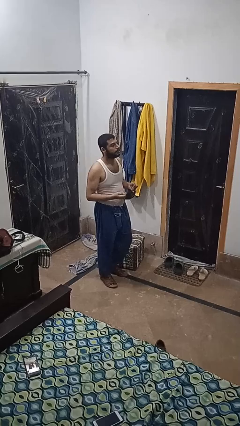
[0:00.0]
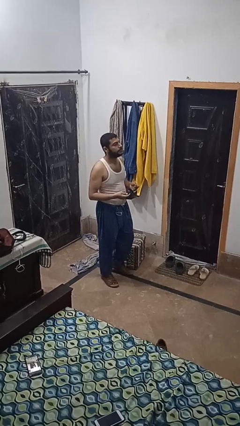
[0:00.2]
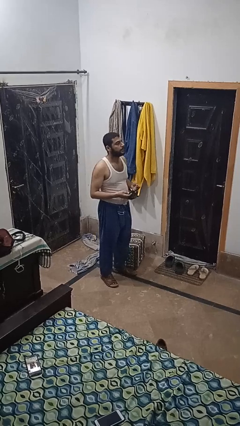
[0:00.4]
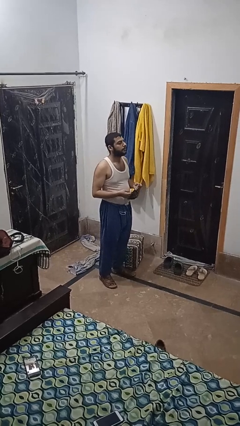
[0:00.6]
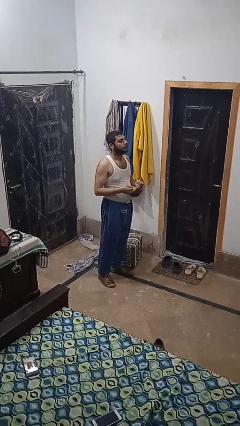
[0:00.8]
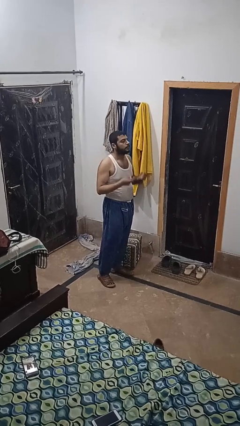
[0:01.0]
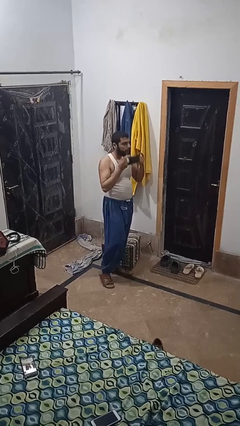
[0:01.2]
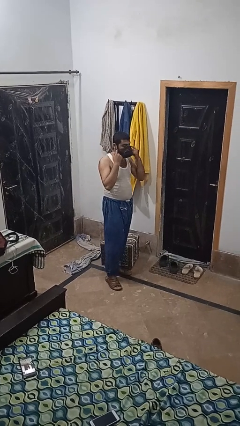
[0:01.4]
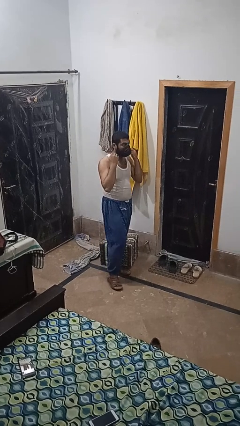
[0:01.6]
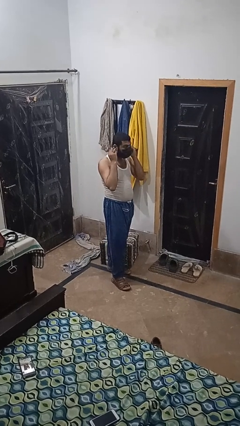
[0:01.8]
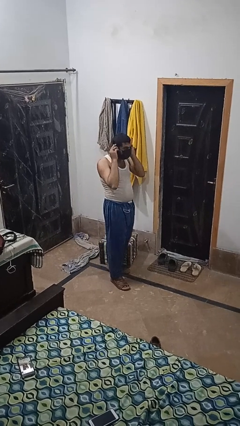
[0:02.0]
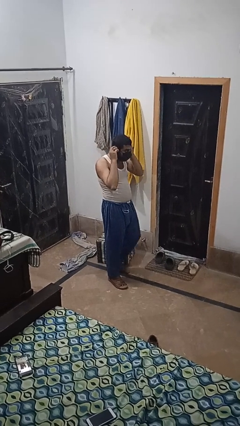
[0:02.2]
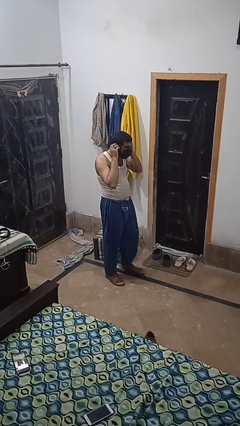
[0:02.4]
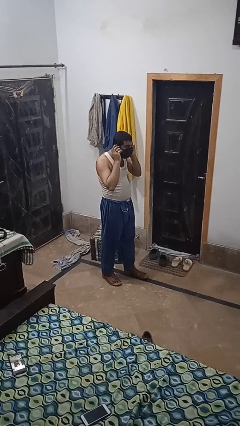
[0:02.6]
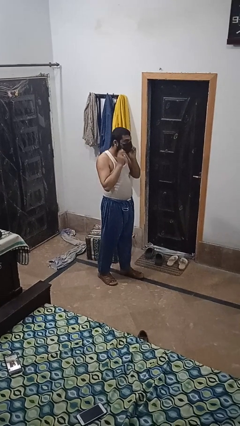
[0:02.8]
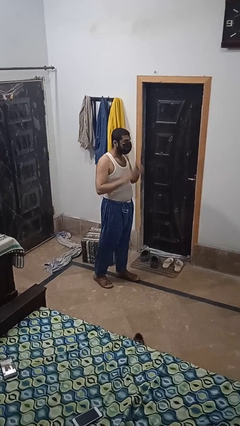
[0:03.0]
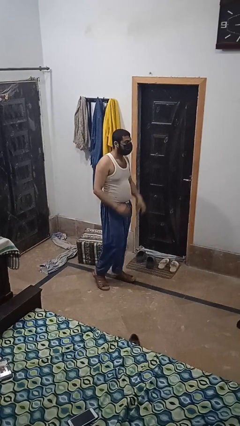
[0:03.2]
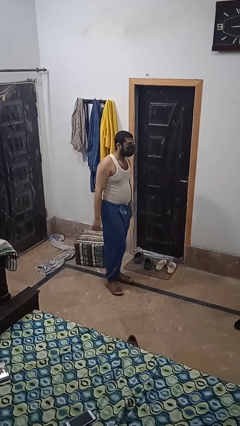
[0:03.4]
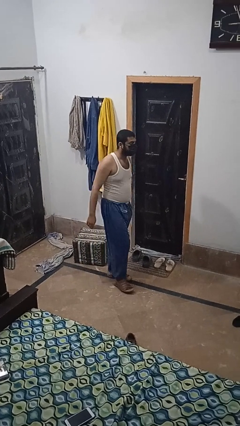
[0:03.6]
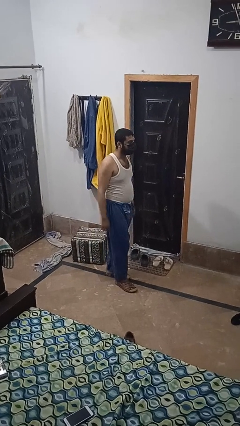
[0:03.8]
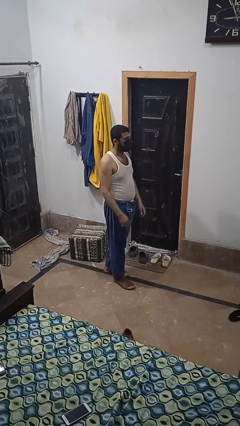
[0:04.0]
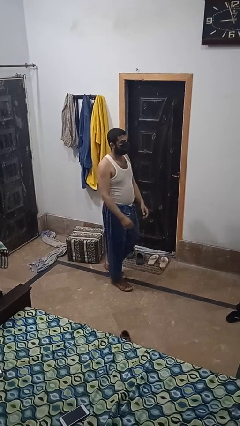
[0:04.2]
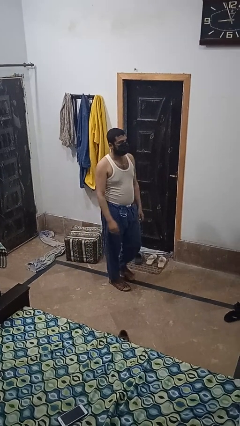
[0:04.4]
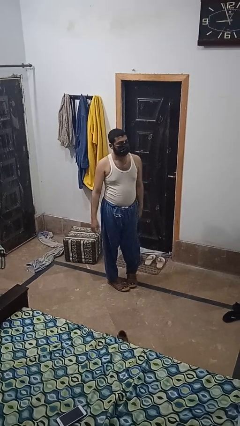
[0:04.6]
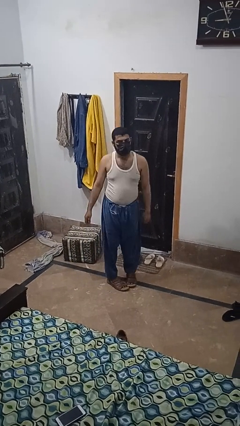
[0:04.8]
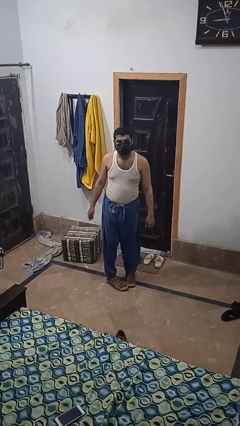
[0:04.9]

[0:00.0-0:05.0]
person puts on facemask

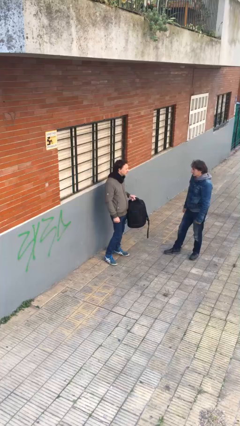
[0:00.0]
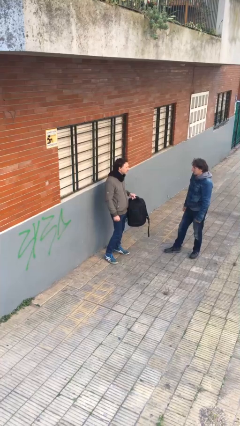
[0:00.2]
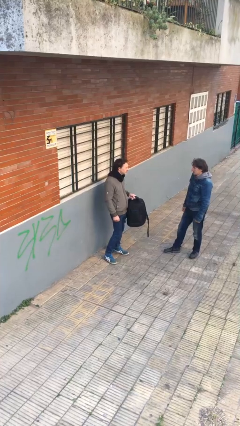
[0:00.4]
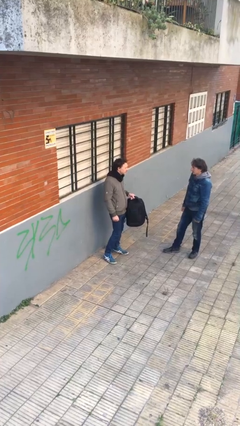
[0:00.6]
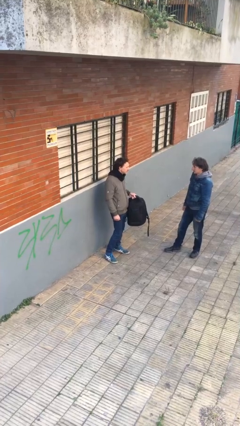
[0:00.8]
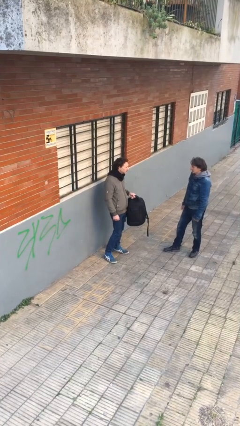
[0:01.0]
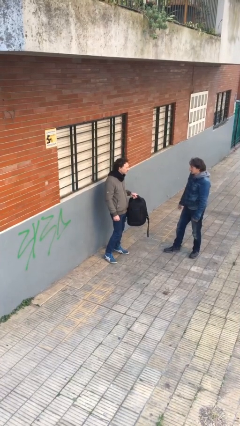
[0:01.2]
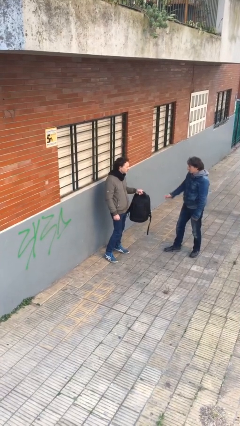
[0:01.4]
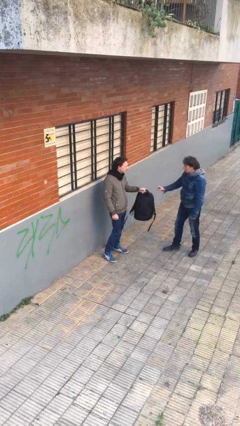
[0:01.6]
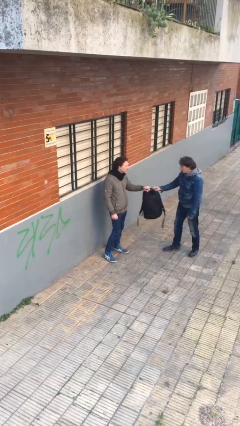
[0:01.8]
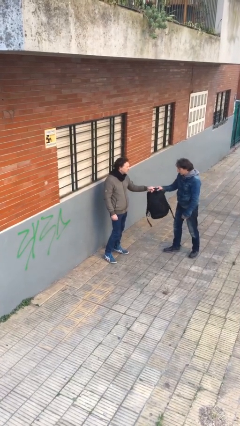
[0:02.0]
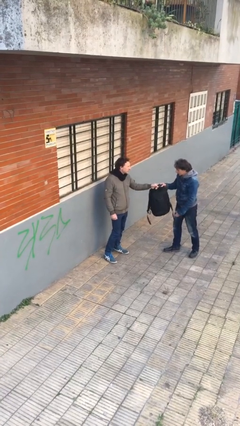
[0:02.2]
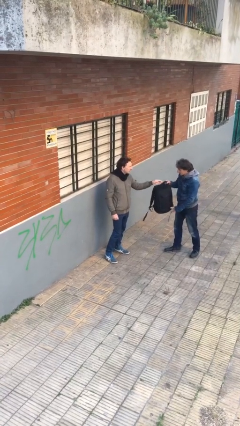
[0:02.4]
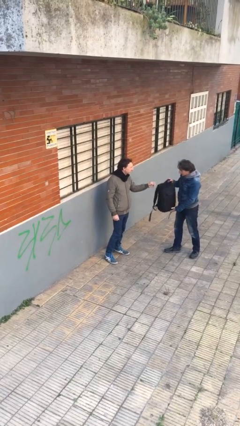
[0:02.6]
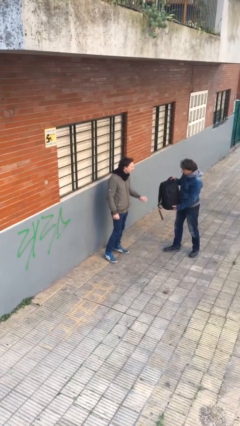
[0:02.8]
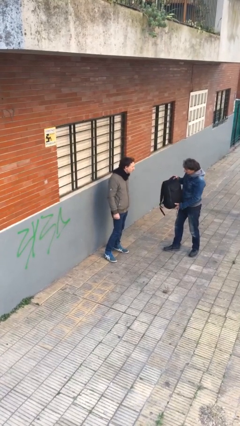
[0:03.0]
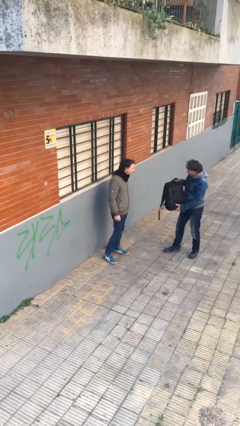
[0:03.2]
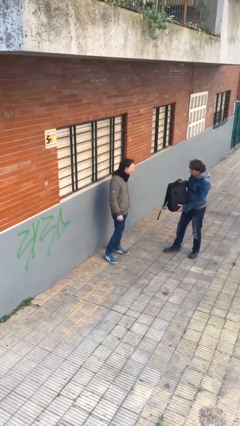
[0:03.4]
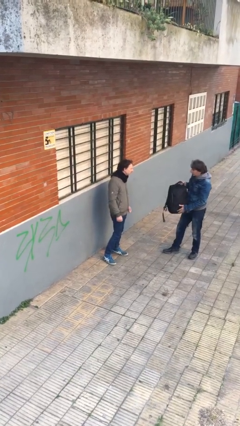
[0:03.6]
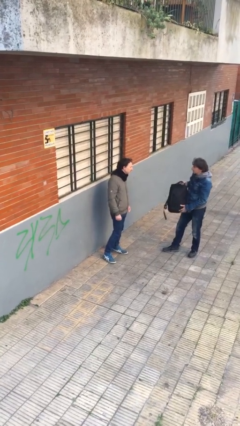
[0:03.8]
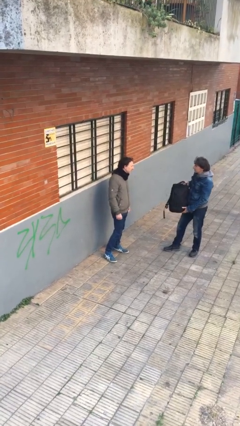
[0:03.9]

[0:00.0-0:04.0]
person transfers object to person

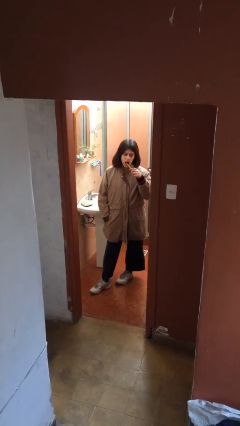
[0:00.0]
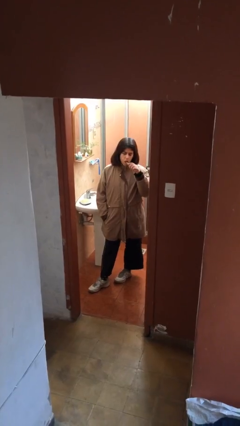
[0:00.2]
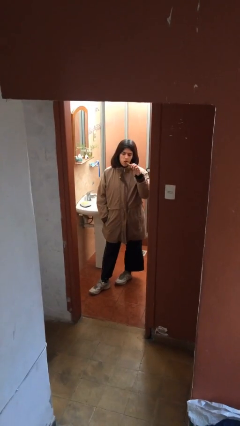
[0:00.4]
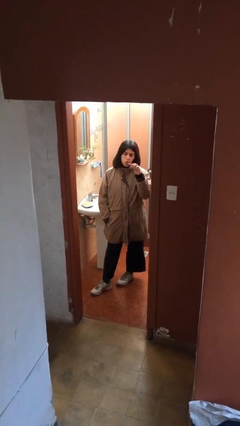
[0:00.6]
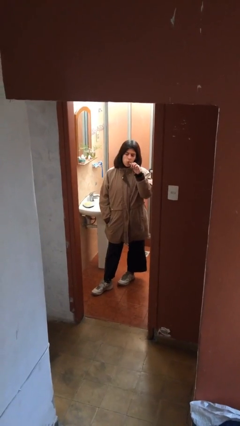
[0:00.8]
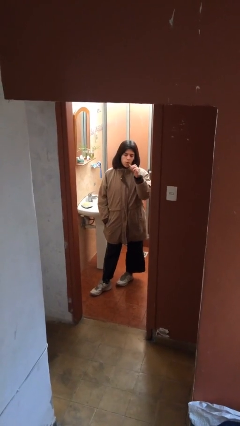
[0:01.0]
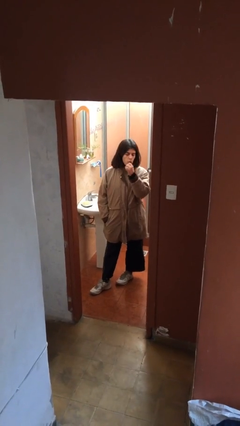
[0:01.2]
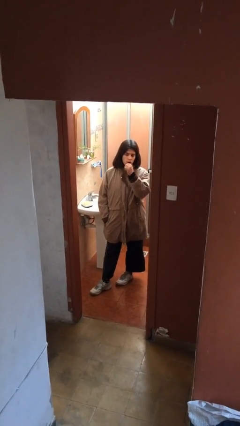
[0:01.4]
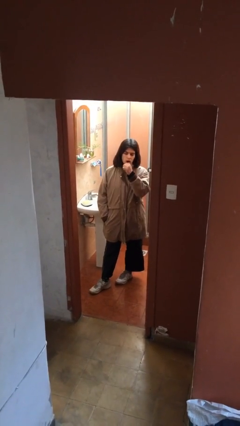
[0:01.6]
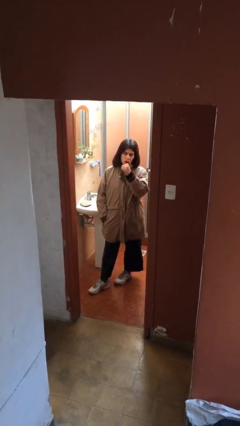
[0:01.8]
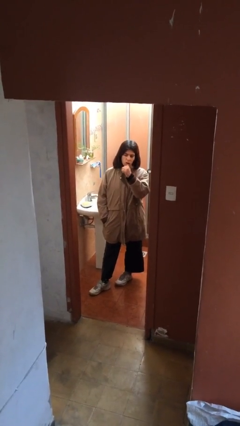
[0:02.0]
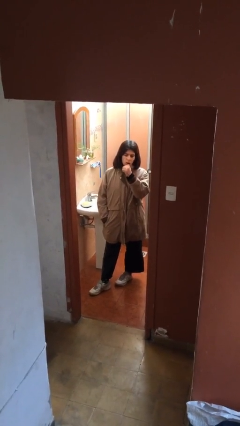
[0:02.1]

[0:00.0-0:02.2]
person brushes teeth

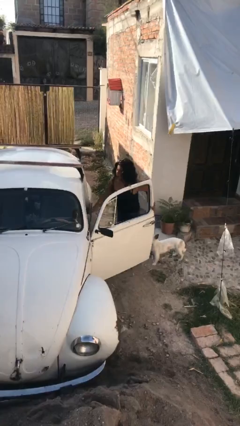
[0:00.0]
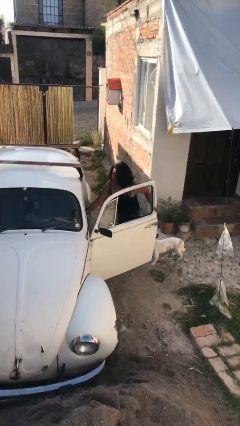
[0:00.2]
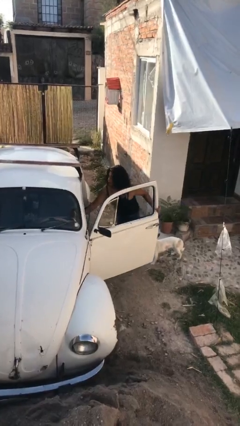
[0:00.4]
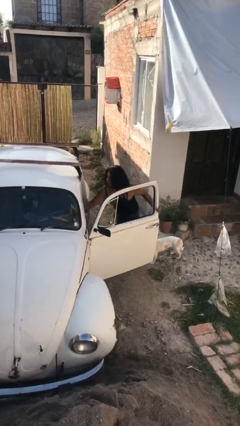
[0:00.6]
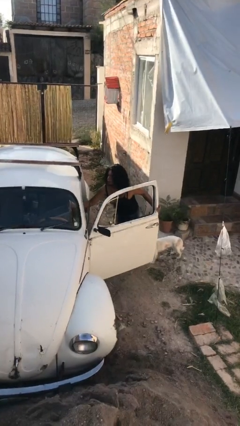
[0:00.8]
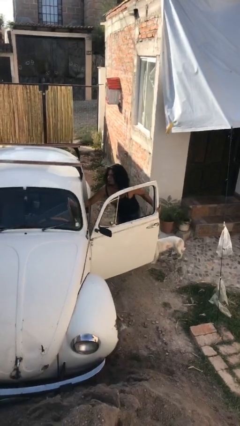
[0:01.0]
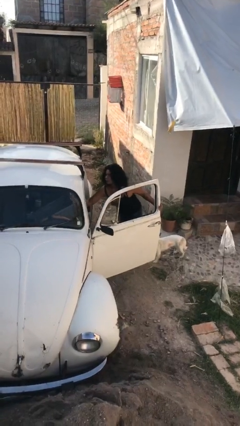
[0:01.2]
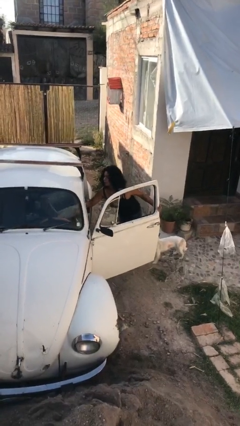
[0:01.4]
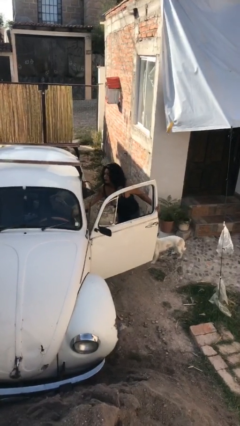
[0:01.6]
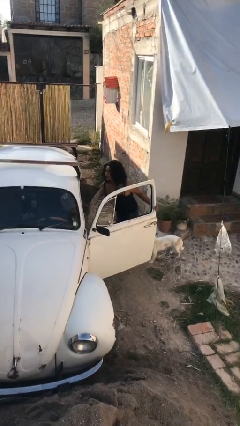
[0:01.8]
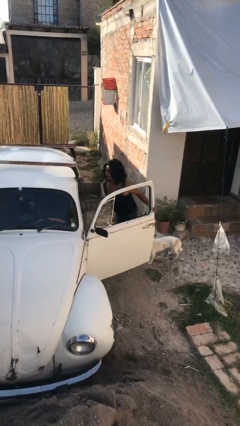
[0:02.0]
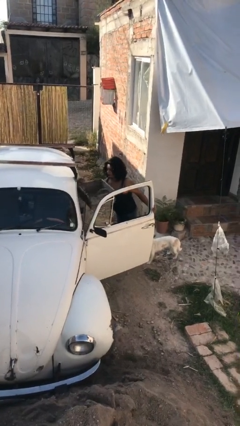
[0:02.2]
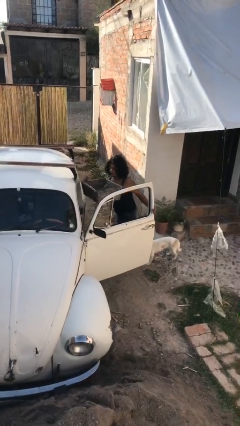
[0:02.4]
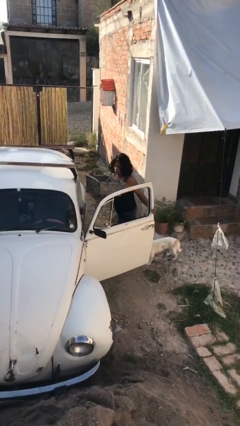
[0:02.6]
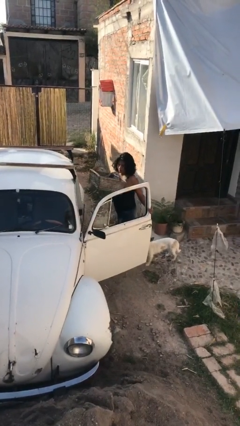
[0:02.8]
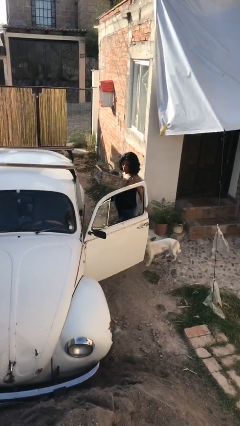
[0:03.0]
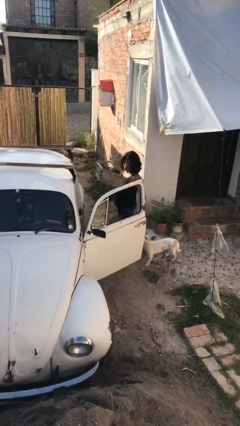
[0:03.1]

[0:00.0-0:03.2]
person unloads car

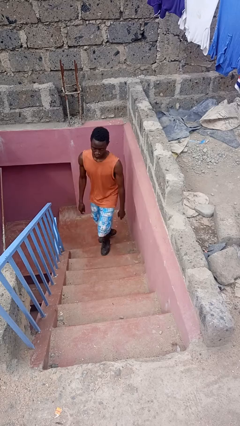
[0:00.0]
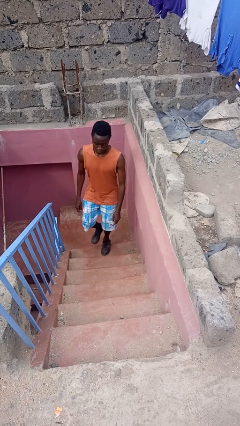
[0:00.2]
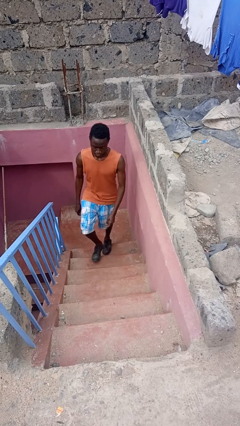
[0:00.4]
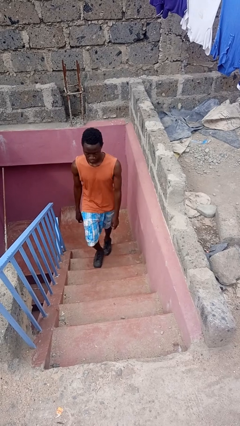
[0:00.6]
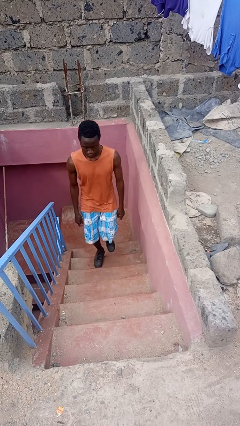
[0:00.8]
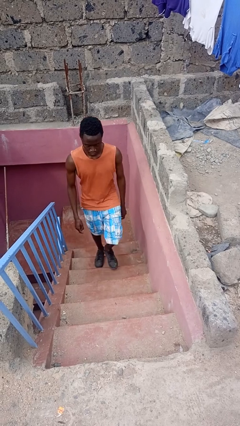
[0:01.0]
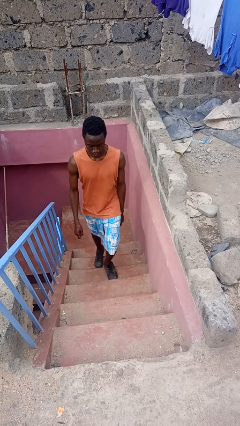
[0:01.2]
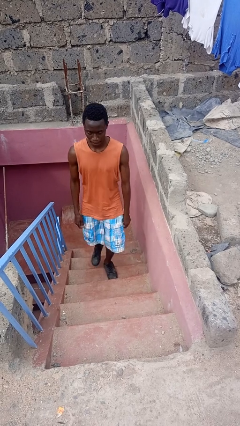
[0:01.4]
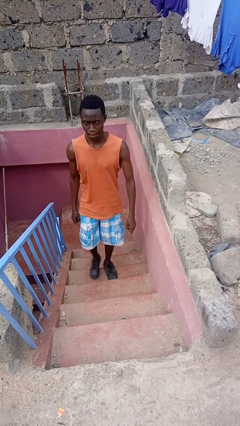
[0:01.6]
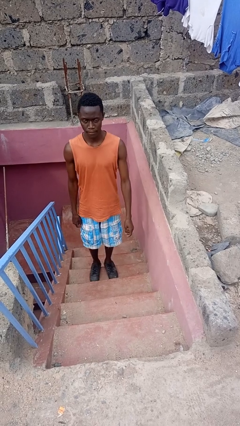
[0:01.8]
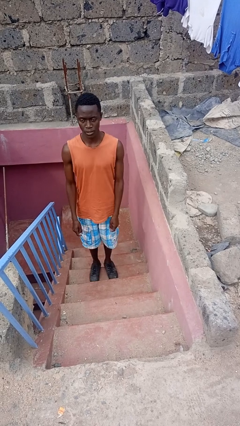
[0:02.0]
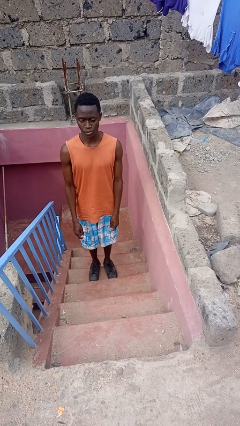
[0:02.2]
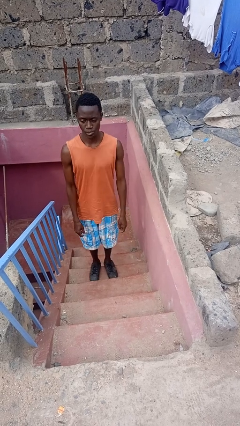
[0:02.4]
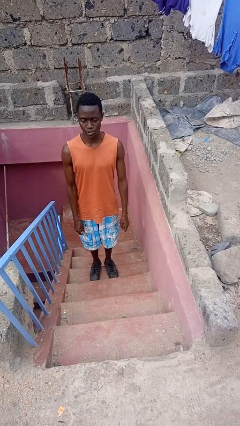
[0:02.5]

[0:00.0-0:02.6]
person climbs up stairs
